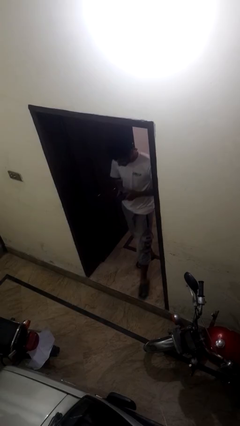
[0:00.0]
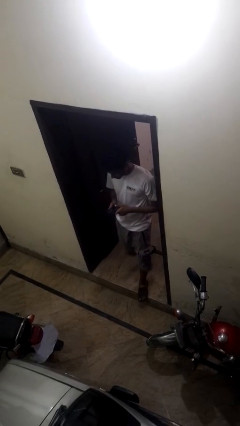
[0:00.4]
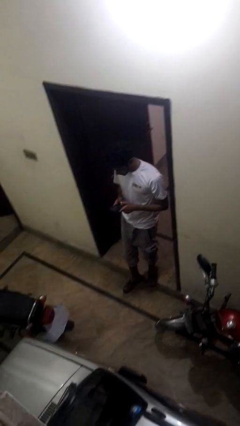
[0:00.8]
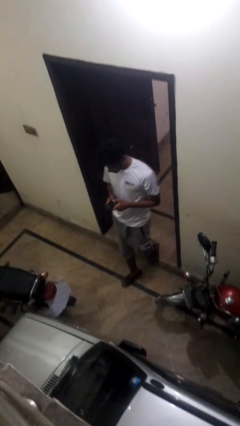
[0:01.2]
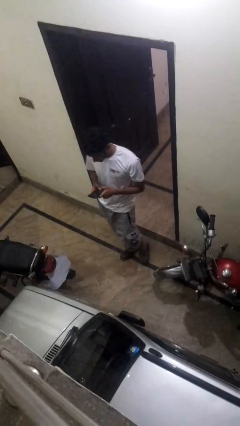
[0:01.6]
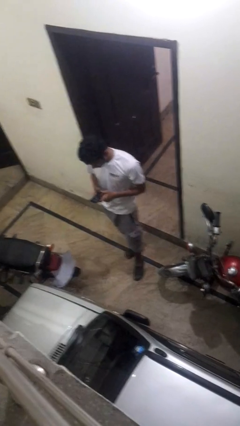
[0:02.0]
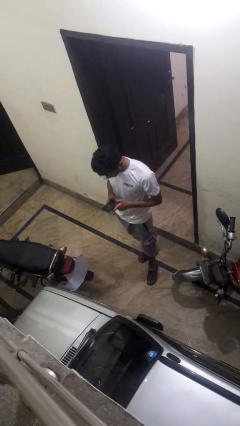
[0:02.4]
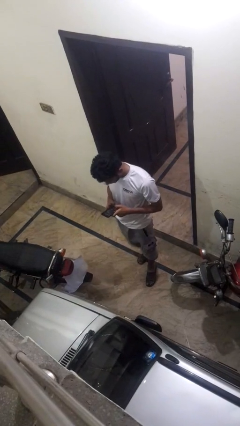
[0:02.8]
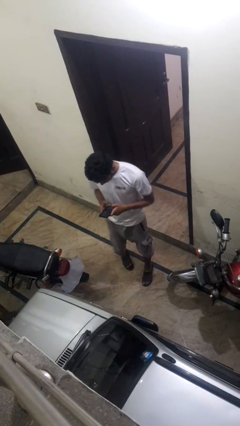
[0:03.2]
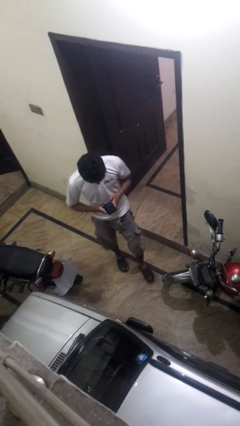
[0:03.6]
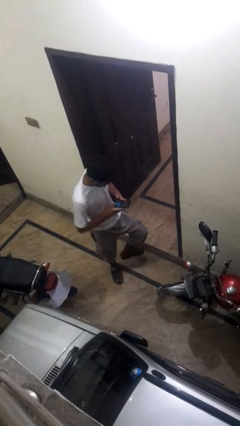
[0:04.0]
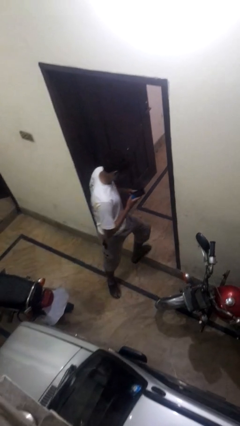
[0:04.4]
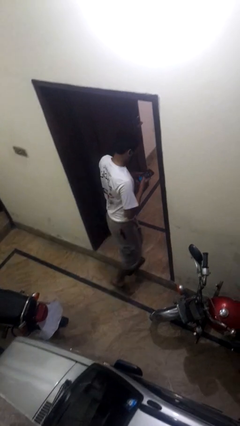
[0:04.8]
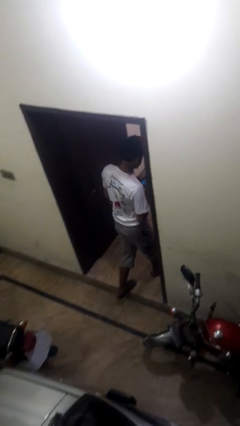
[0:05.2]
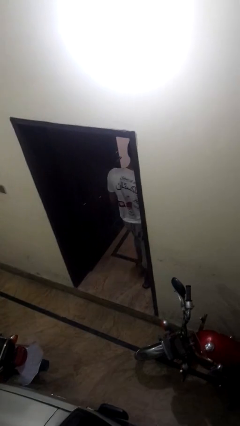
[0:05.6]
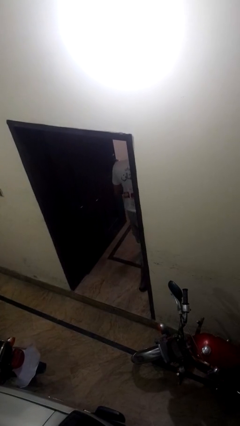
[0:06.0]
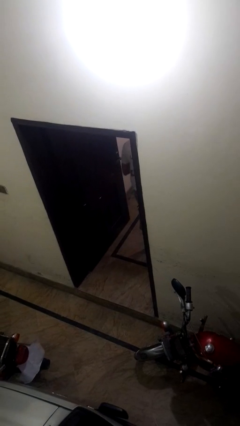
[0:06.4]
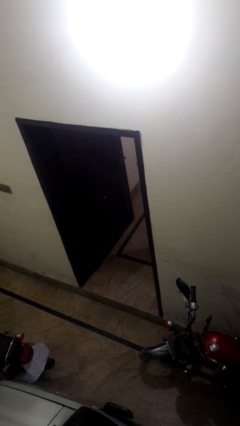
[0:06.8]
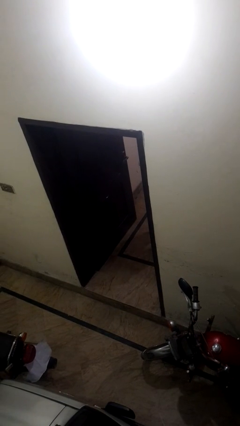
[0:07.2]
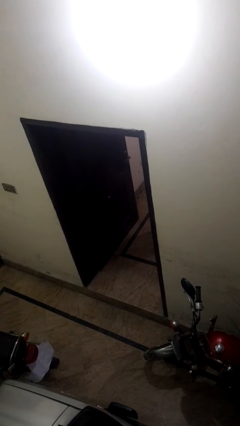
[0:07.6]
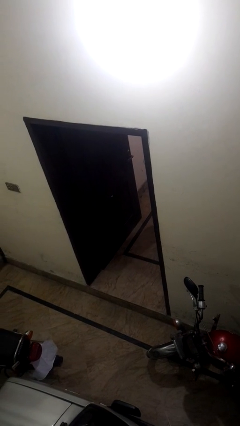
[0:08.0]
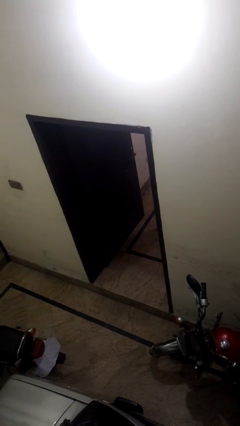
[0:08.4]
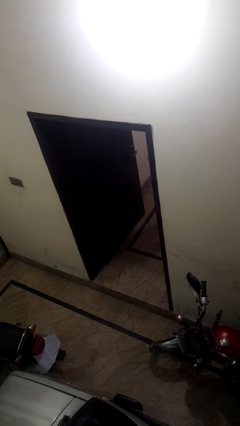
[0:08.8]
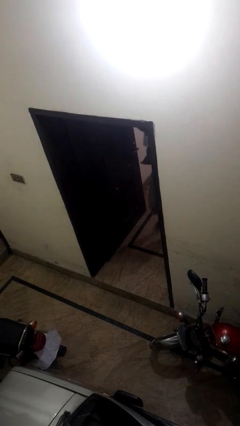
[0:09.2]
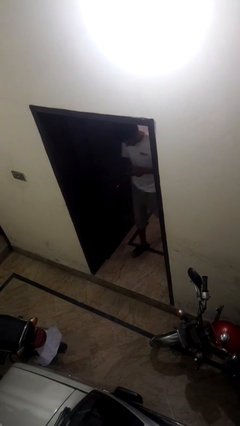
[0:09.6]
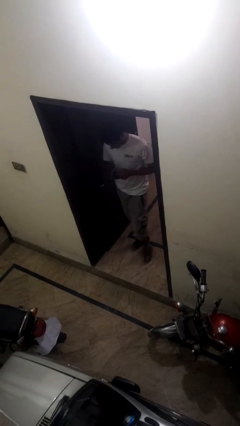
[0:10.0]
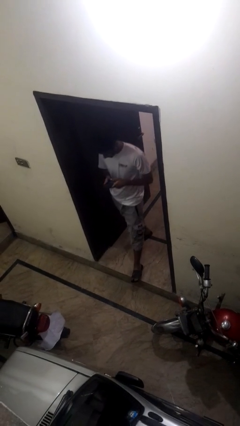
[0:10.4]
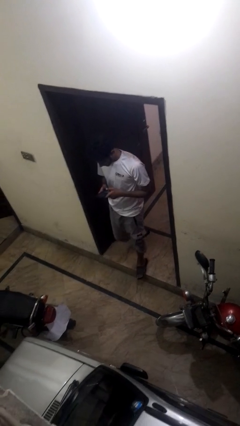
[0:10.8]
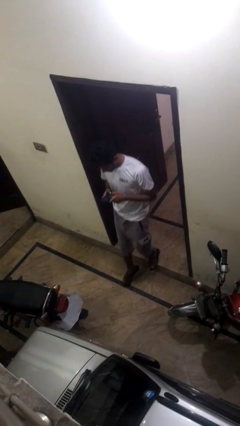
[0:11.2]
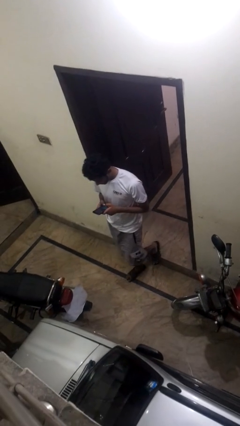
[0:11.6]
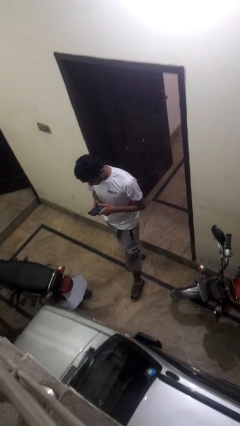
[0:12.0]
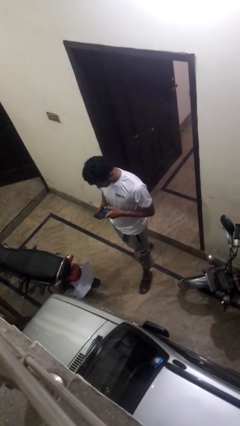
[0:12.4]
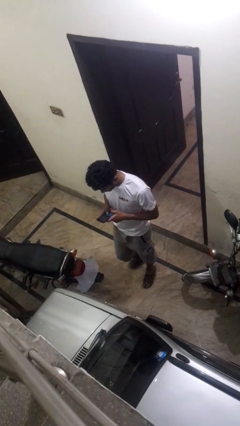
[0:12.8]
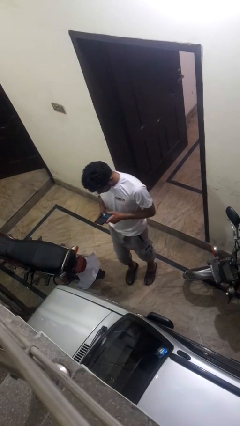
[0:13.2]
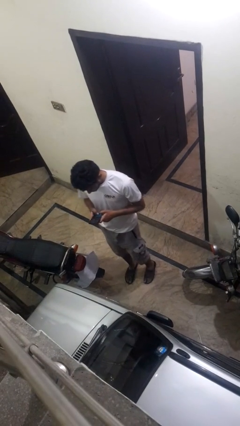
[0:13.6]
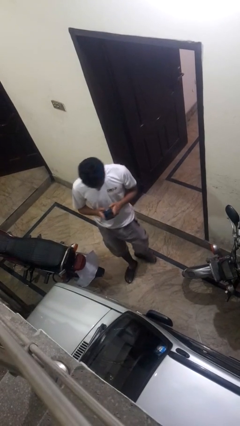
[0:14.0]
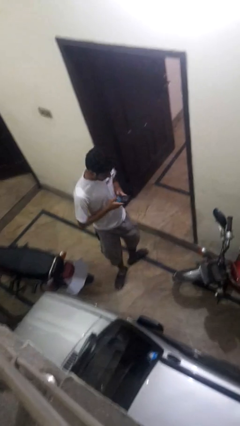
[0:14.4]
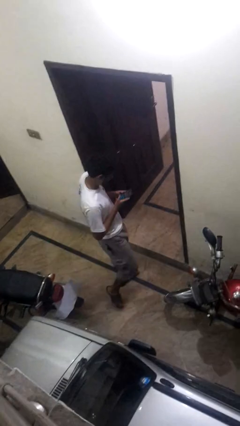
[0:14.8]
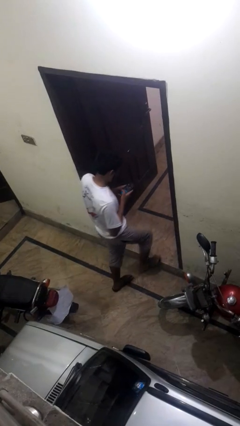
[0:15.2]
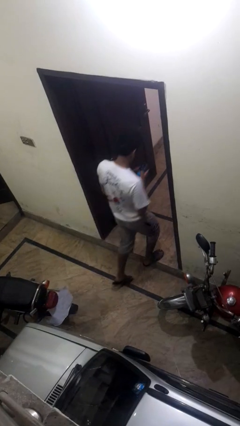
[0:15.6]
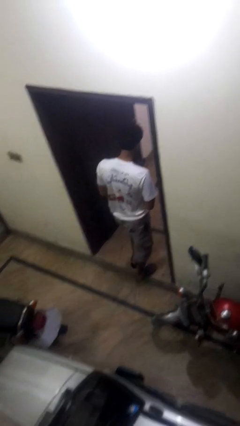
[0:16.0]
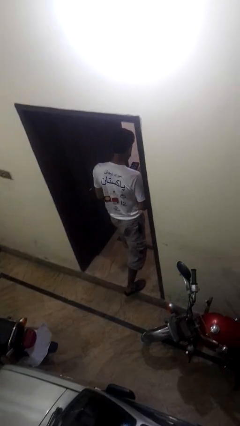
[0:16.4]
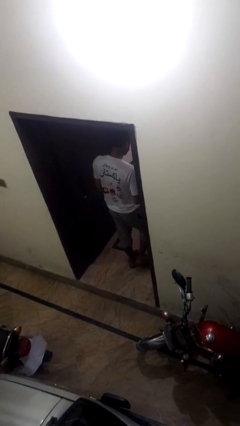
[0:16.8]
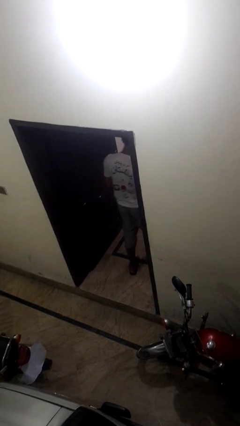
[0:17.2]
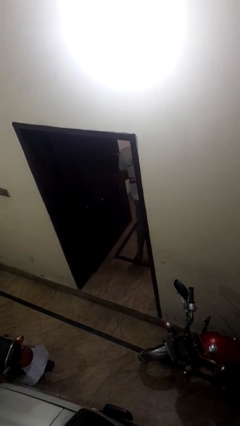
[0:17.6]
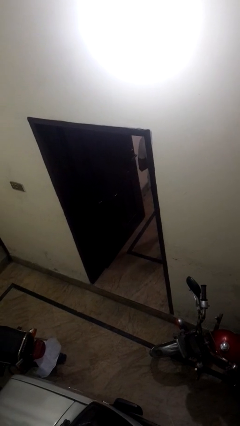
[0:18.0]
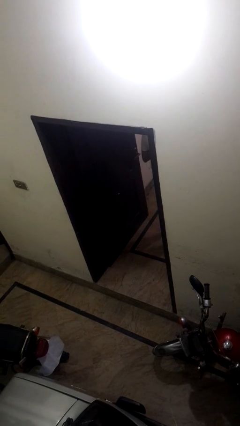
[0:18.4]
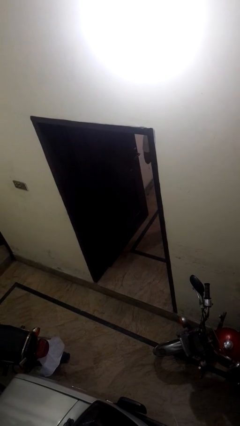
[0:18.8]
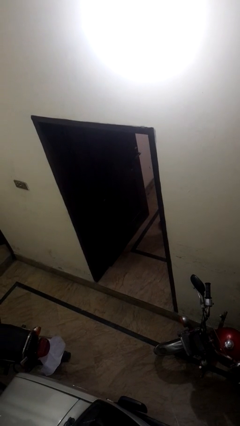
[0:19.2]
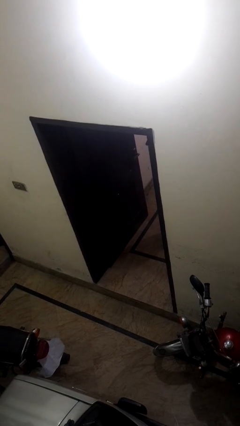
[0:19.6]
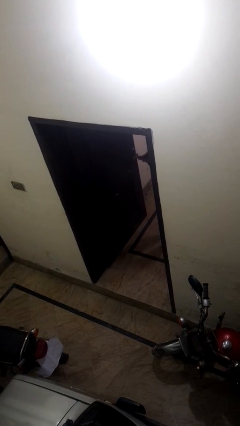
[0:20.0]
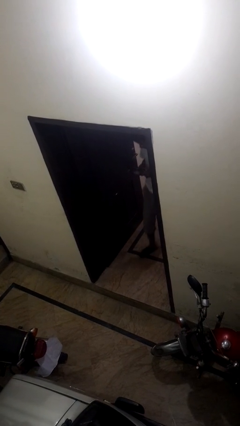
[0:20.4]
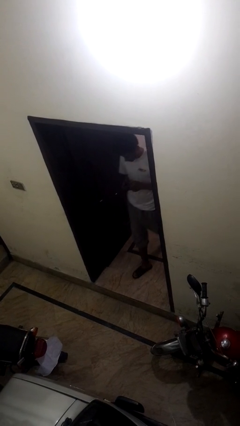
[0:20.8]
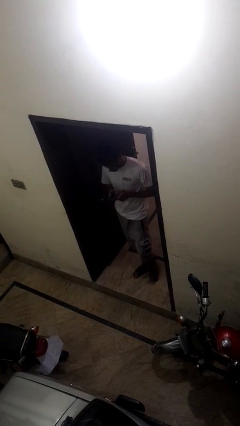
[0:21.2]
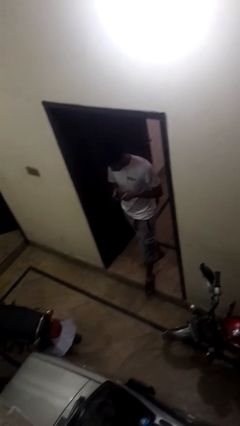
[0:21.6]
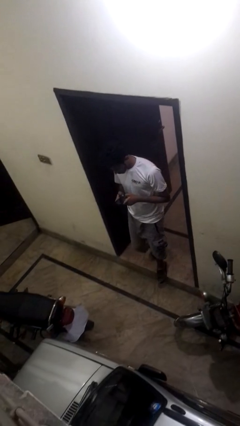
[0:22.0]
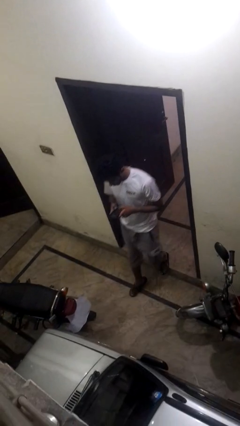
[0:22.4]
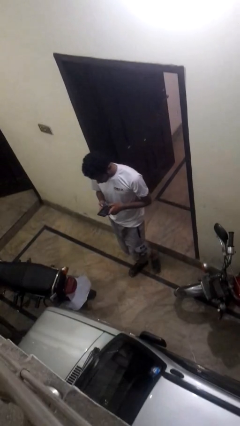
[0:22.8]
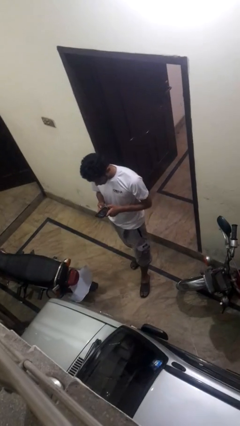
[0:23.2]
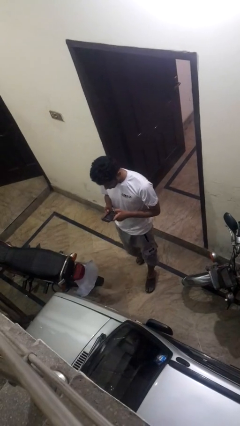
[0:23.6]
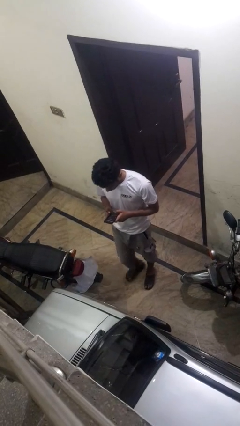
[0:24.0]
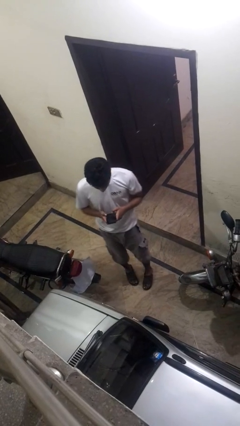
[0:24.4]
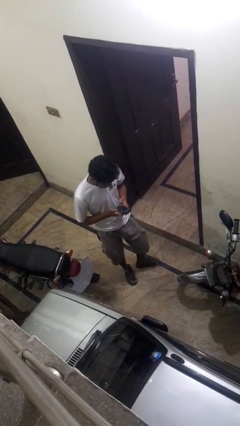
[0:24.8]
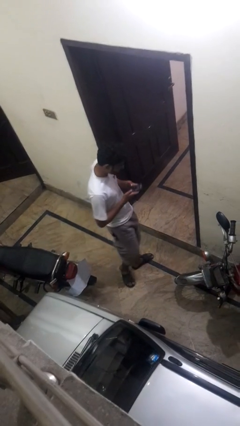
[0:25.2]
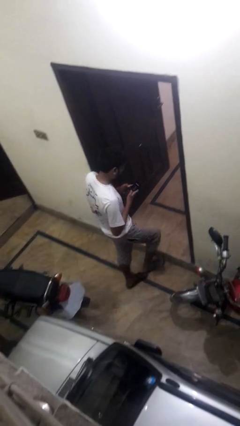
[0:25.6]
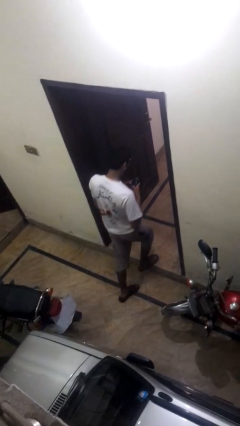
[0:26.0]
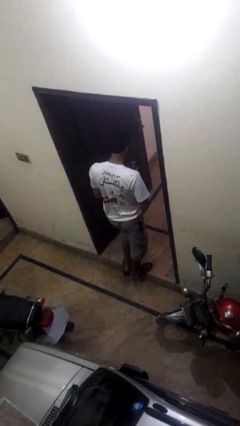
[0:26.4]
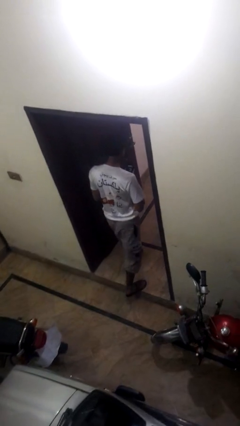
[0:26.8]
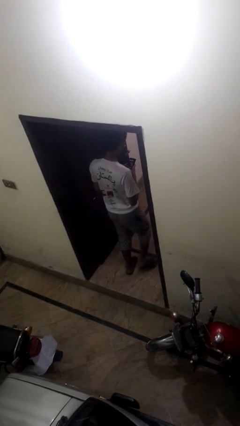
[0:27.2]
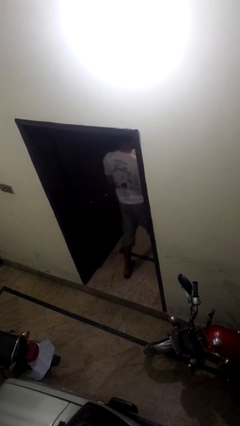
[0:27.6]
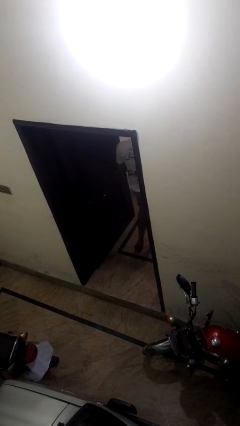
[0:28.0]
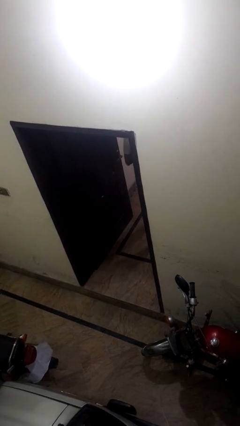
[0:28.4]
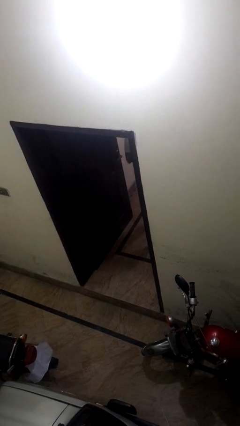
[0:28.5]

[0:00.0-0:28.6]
person texts on phone

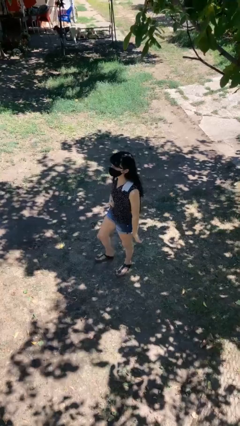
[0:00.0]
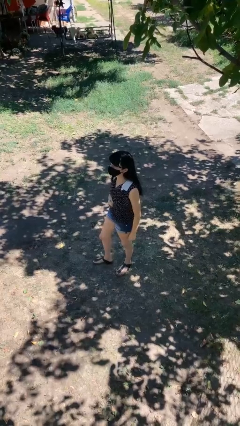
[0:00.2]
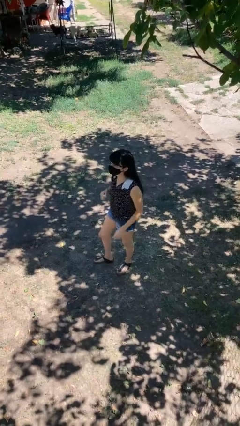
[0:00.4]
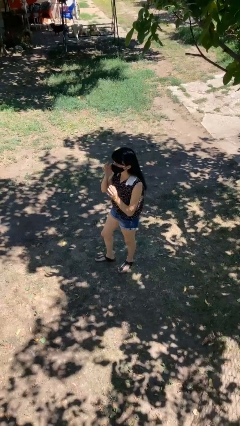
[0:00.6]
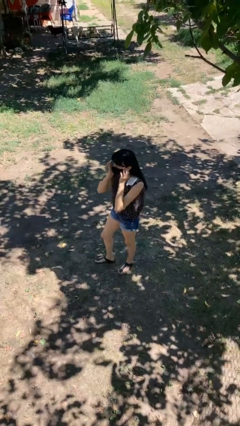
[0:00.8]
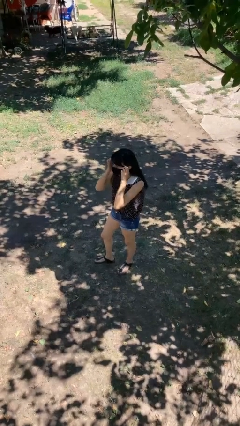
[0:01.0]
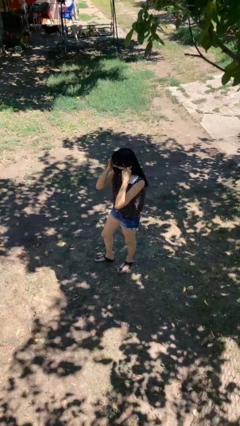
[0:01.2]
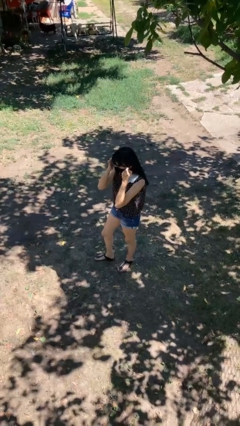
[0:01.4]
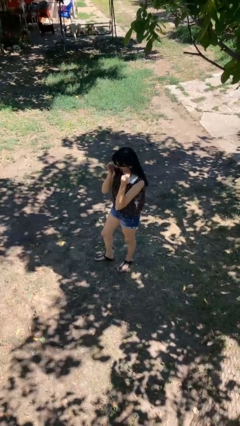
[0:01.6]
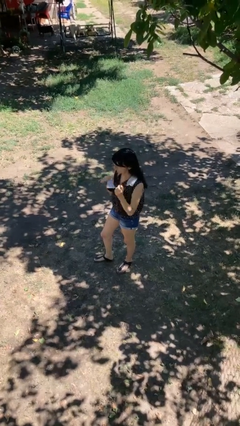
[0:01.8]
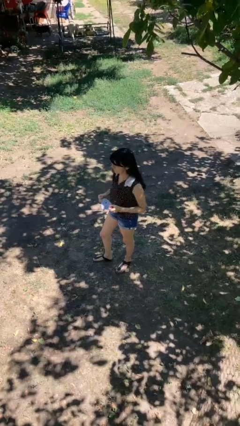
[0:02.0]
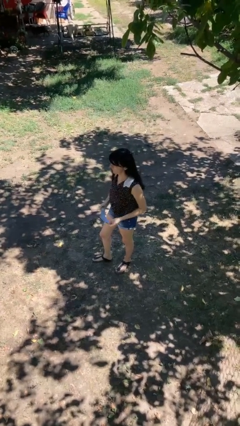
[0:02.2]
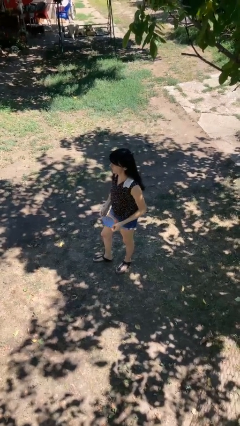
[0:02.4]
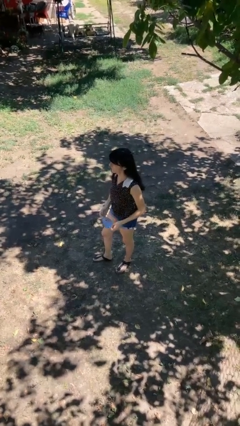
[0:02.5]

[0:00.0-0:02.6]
person takes off facemask

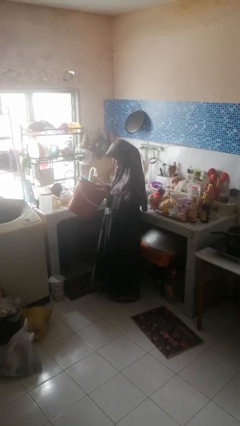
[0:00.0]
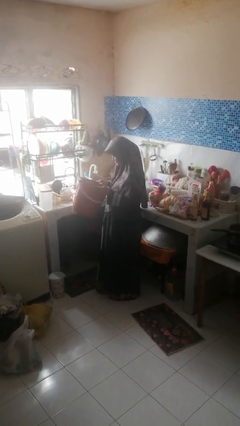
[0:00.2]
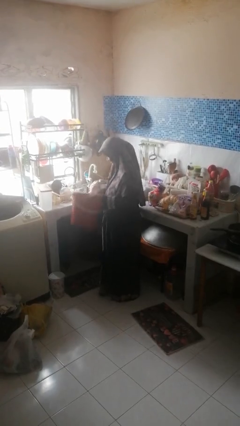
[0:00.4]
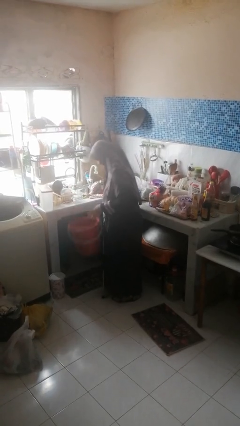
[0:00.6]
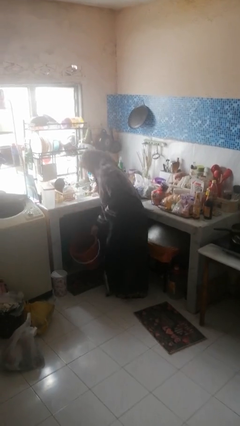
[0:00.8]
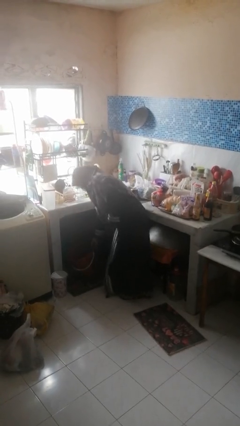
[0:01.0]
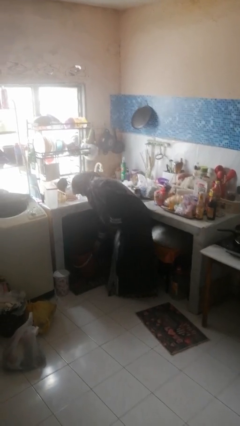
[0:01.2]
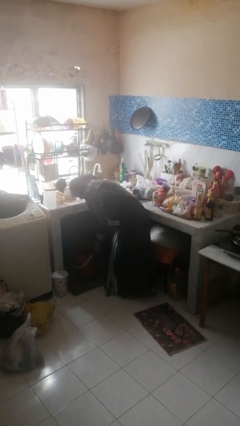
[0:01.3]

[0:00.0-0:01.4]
person puts down object into cabinet
